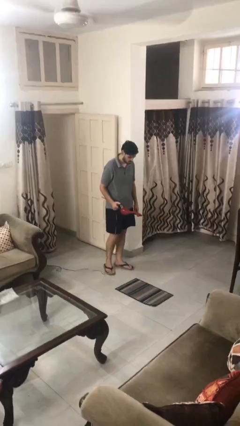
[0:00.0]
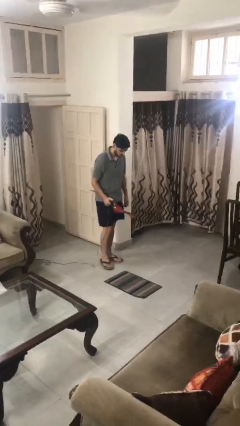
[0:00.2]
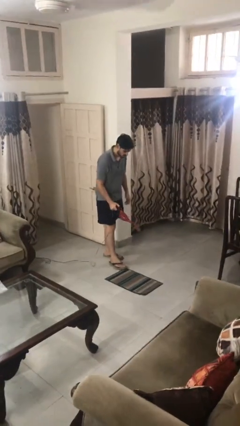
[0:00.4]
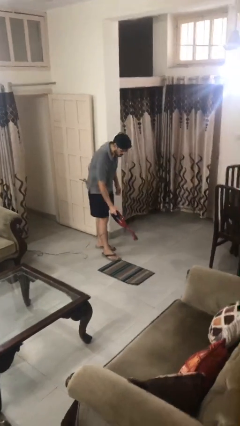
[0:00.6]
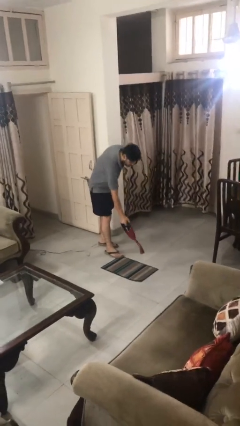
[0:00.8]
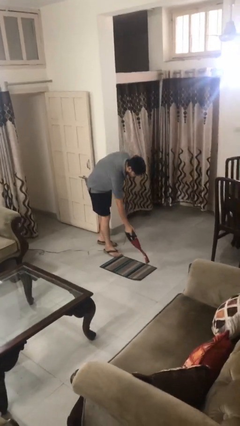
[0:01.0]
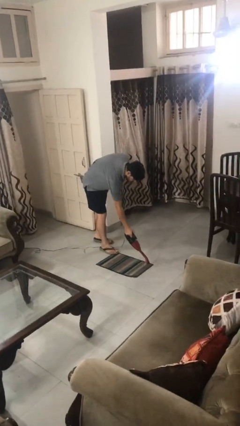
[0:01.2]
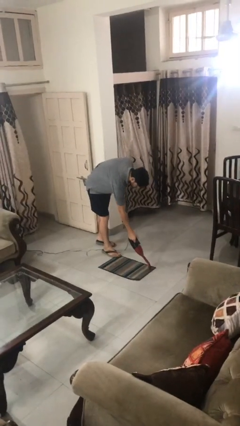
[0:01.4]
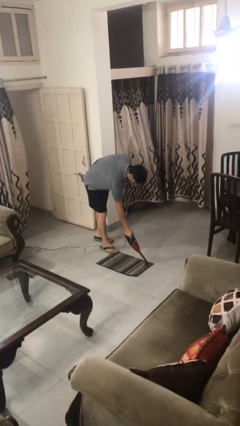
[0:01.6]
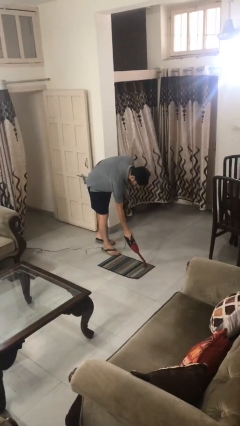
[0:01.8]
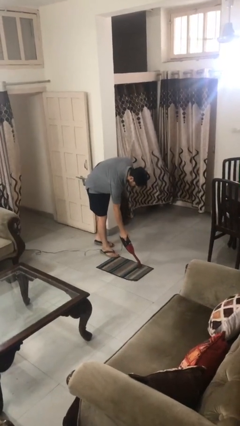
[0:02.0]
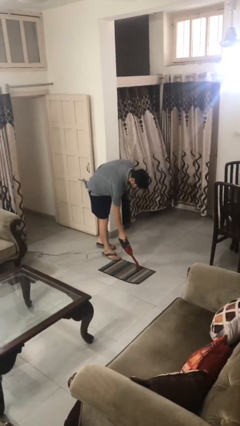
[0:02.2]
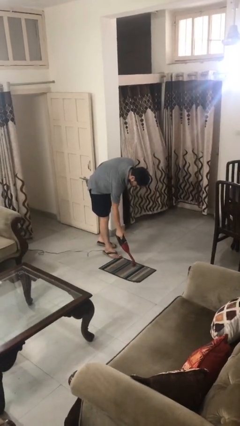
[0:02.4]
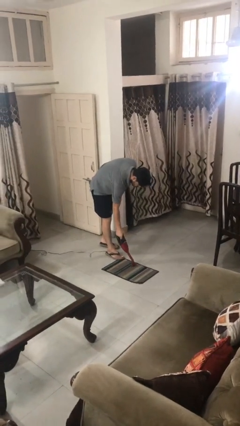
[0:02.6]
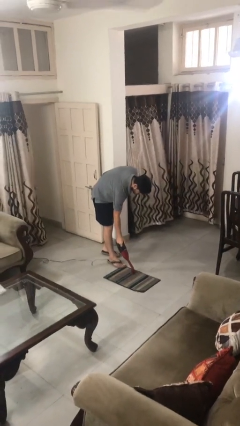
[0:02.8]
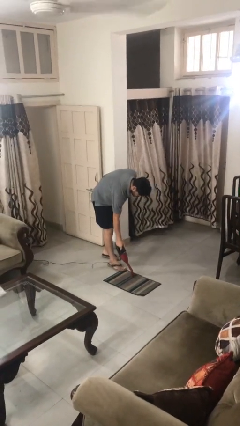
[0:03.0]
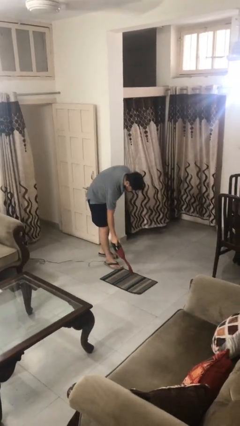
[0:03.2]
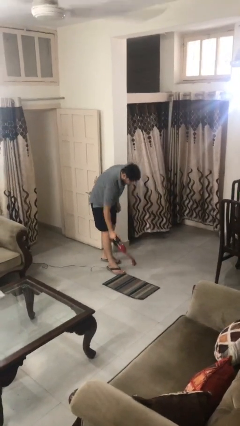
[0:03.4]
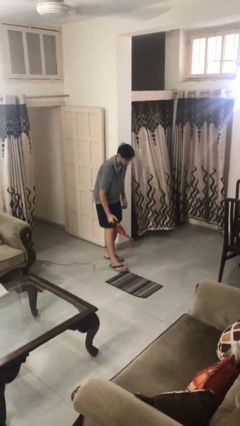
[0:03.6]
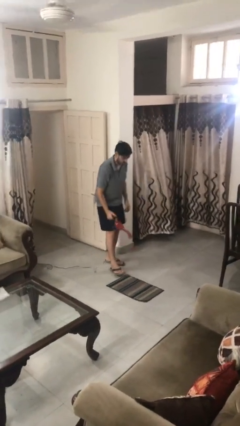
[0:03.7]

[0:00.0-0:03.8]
person vacuums carpet

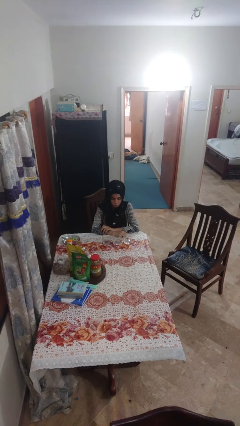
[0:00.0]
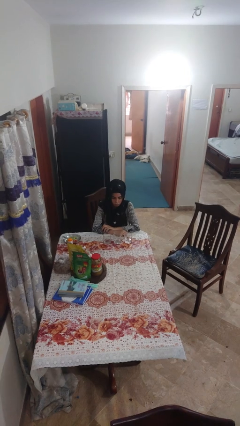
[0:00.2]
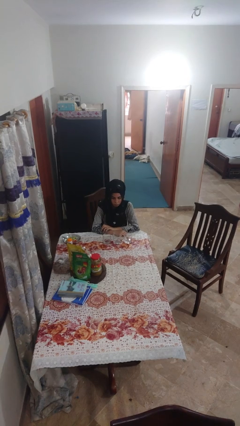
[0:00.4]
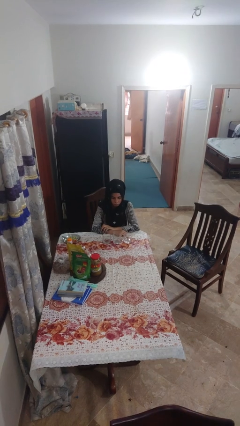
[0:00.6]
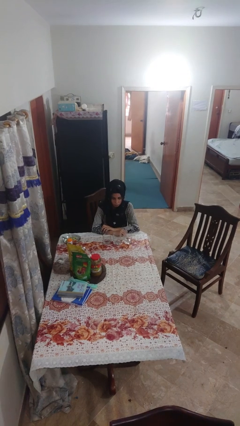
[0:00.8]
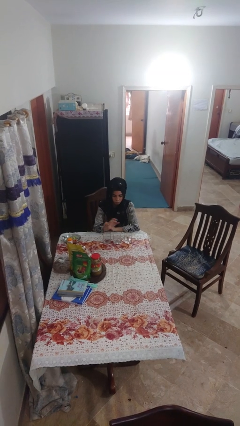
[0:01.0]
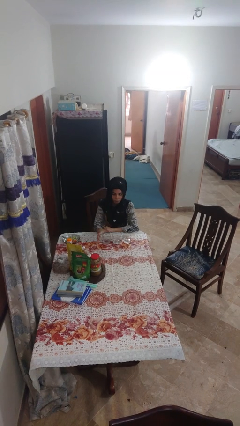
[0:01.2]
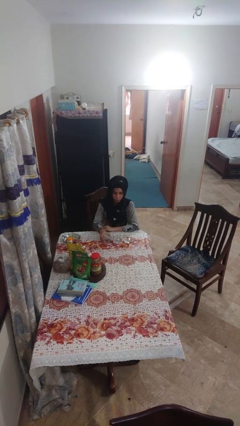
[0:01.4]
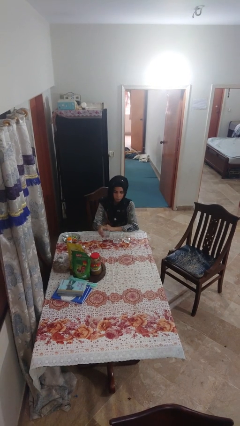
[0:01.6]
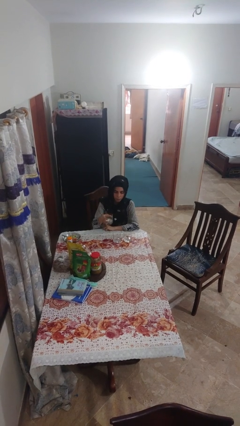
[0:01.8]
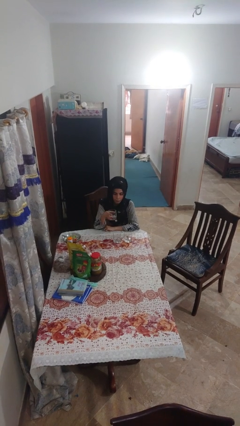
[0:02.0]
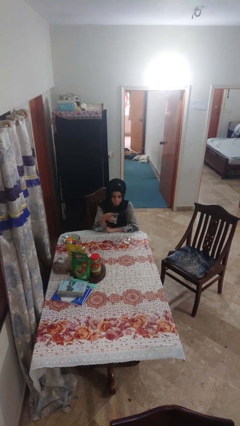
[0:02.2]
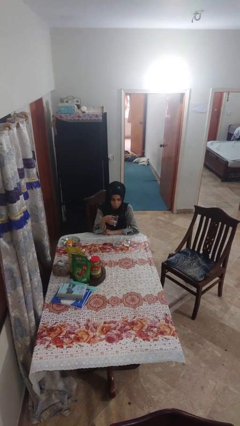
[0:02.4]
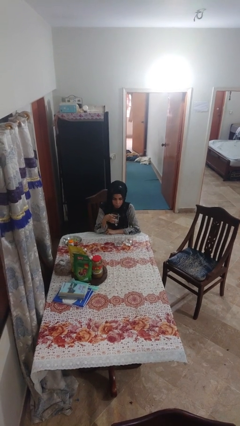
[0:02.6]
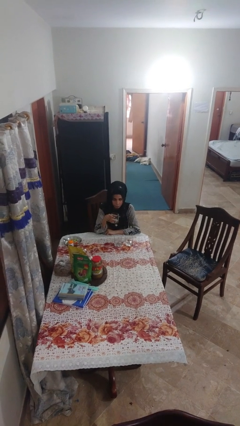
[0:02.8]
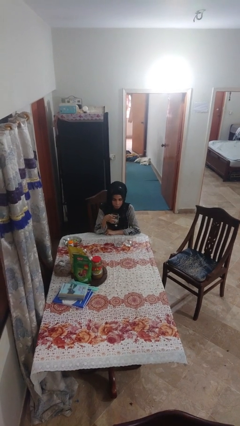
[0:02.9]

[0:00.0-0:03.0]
person picks up object from table

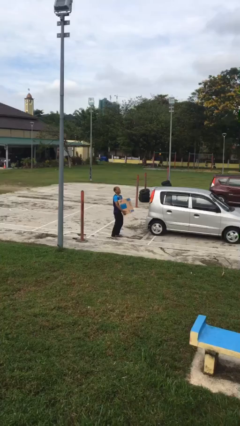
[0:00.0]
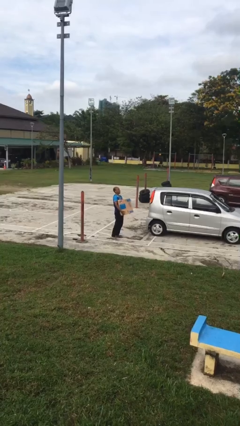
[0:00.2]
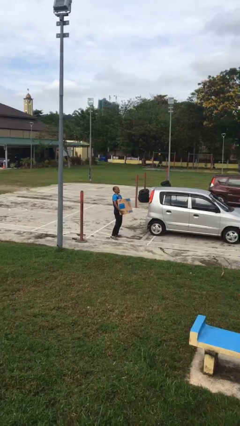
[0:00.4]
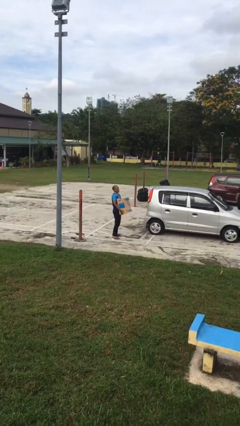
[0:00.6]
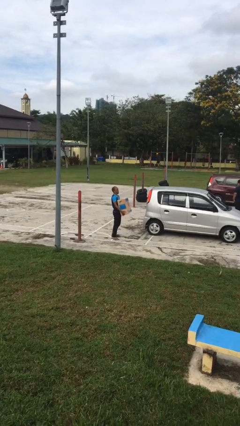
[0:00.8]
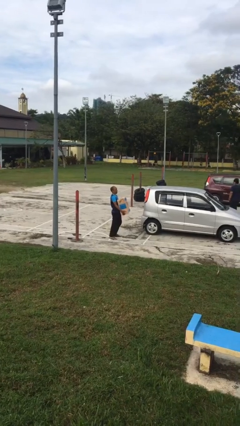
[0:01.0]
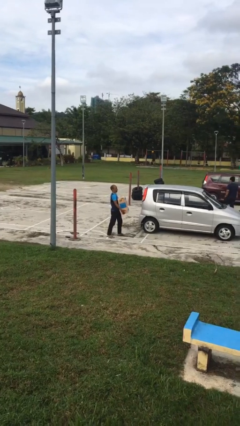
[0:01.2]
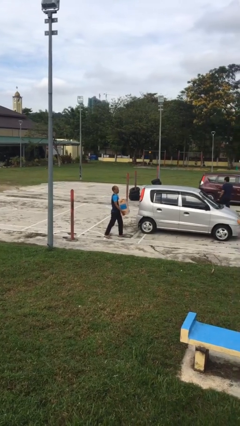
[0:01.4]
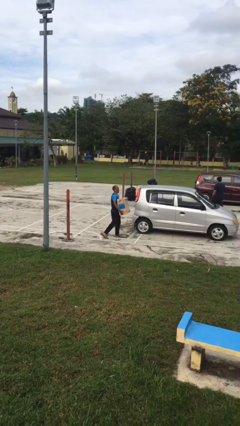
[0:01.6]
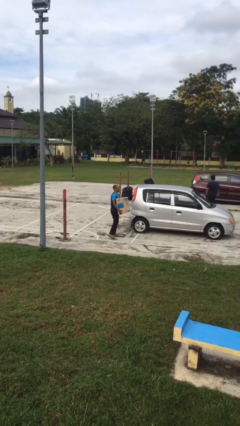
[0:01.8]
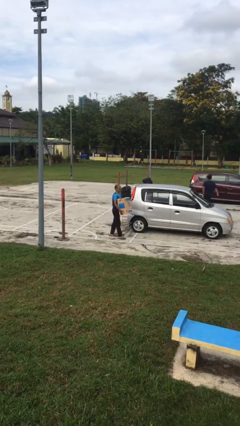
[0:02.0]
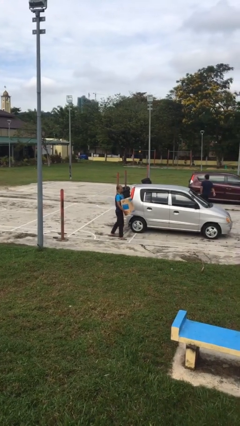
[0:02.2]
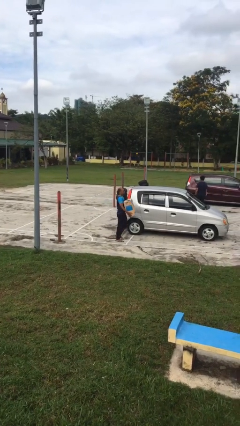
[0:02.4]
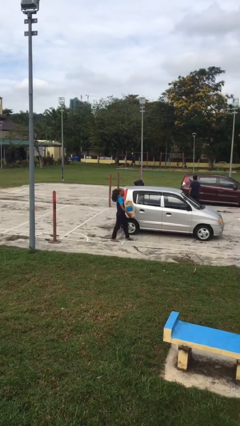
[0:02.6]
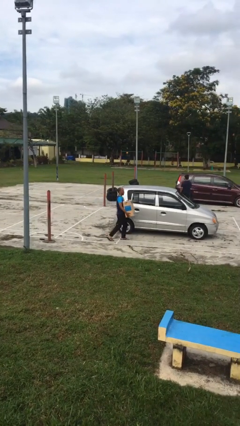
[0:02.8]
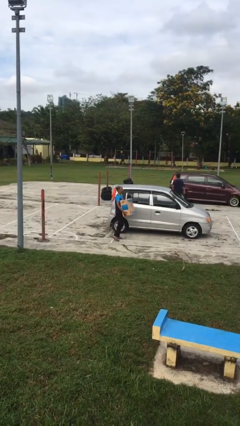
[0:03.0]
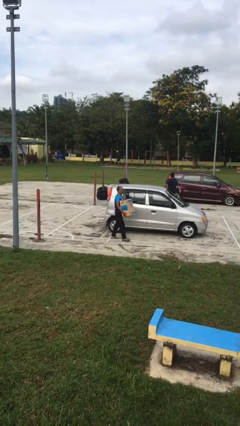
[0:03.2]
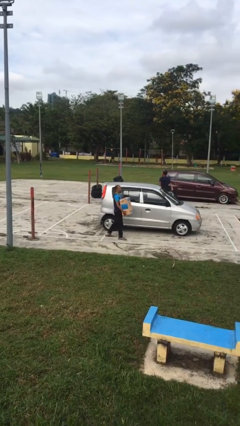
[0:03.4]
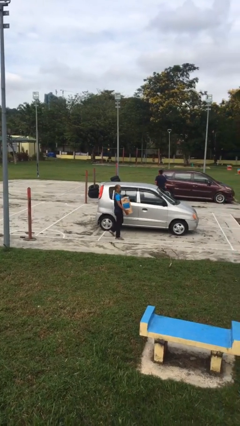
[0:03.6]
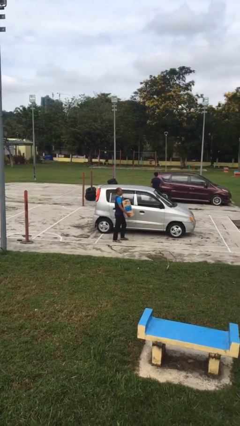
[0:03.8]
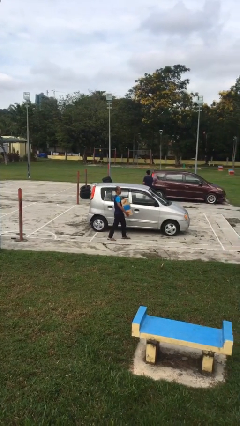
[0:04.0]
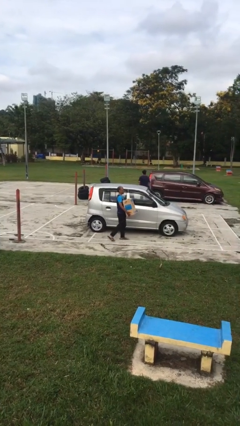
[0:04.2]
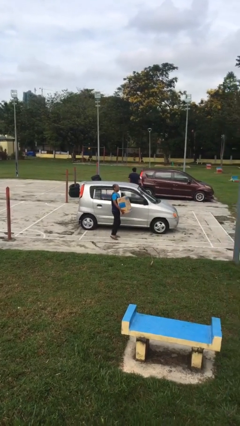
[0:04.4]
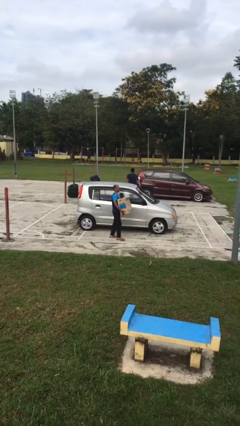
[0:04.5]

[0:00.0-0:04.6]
person carries heavy object

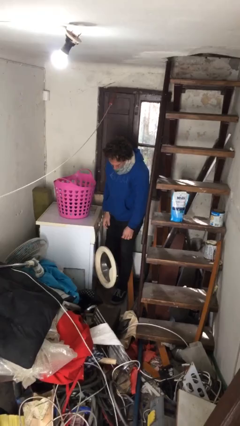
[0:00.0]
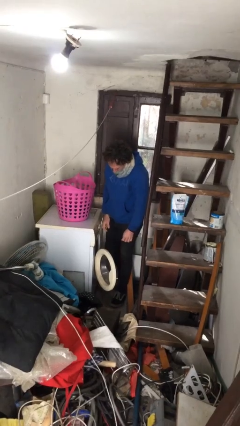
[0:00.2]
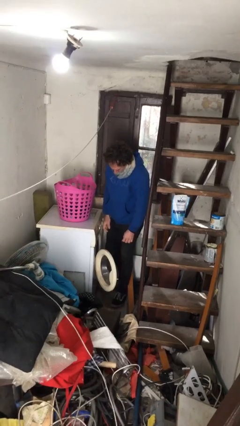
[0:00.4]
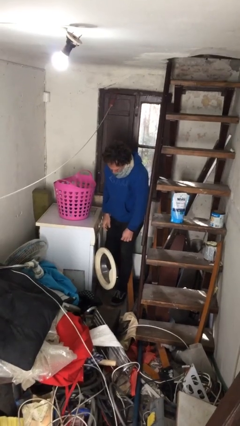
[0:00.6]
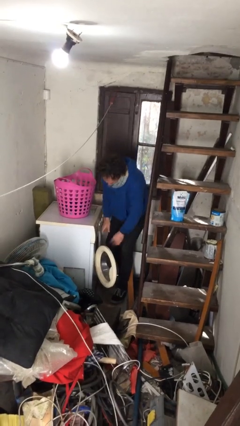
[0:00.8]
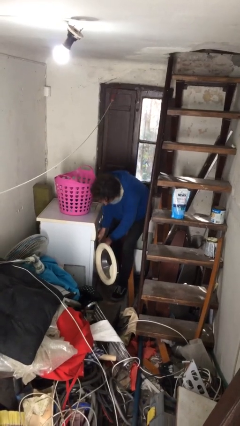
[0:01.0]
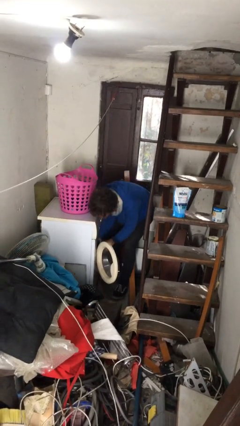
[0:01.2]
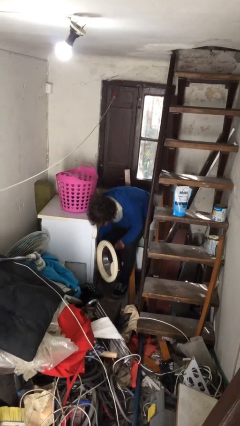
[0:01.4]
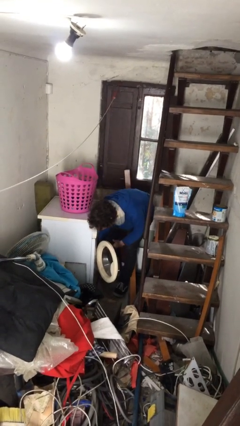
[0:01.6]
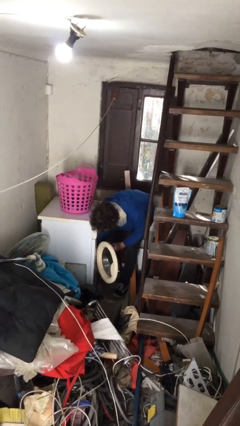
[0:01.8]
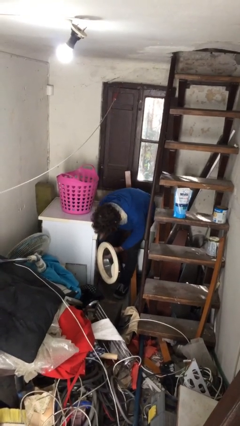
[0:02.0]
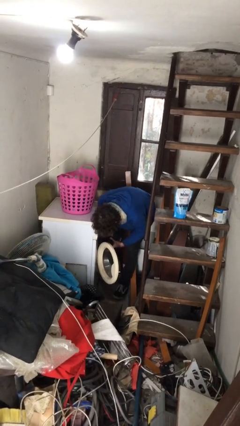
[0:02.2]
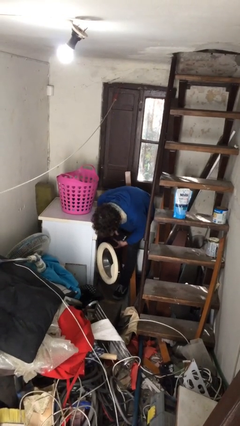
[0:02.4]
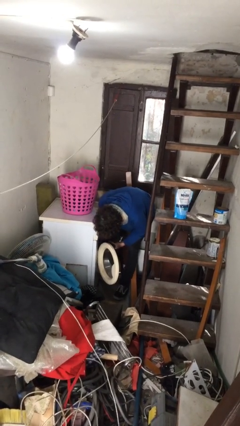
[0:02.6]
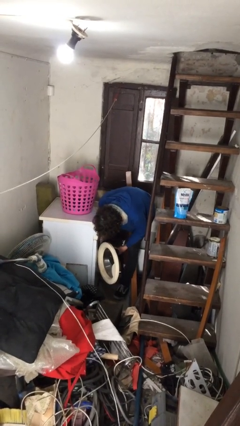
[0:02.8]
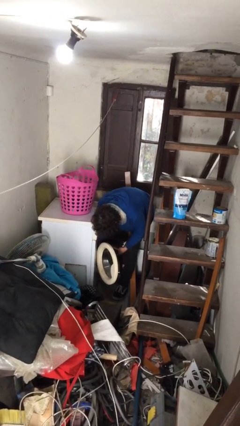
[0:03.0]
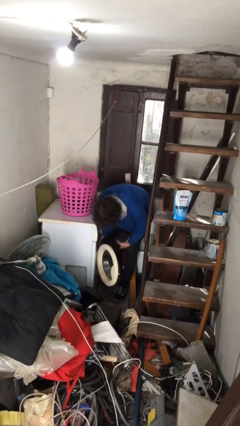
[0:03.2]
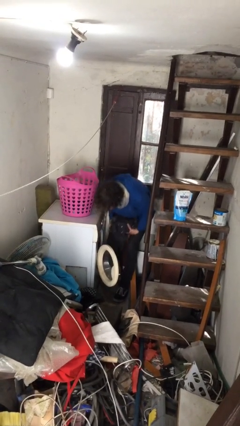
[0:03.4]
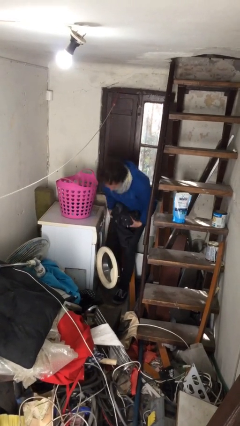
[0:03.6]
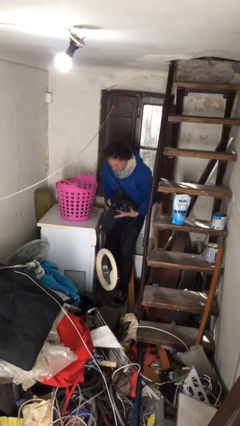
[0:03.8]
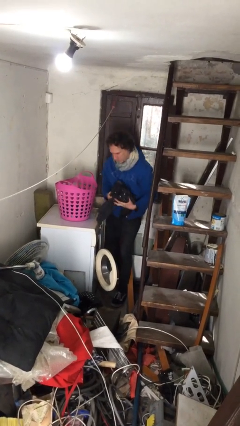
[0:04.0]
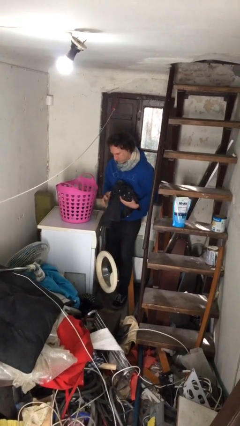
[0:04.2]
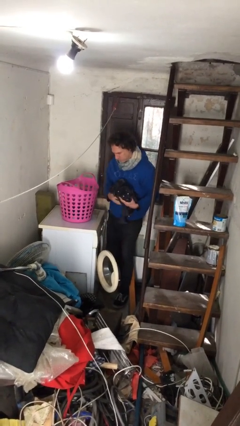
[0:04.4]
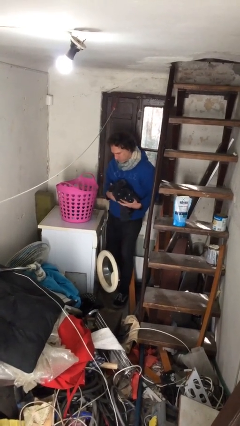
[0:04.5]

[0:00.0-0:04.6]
person loads clotheswasher

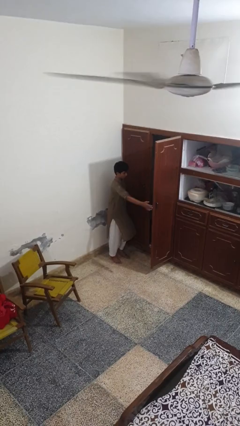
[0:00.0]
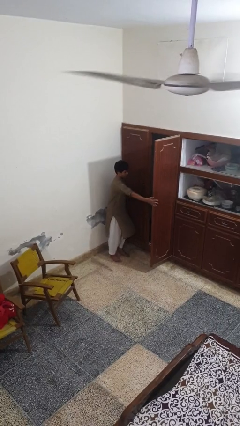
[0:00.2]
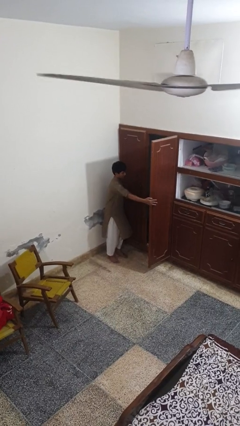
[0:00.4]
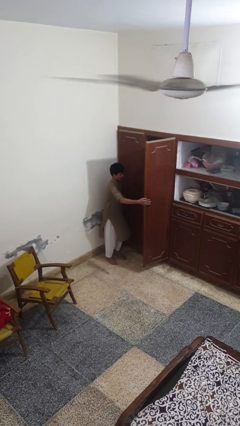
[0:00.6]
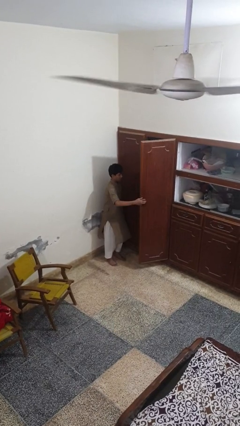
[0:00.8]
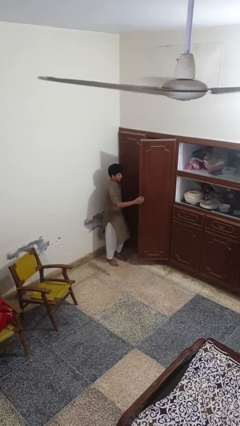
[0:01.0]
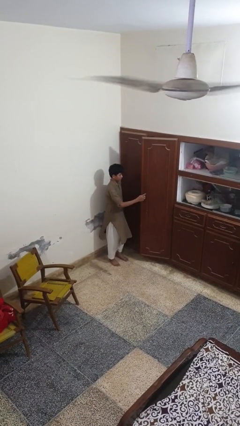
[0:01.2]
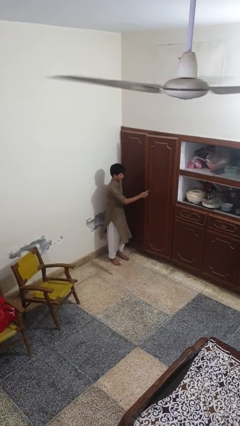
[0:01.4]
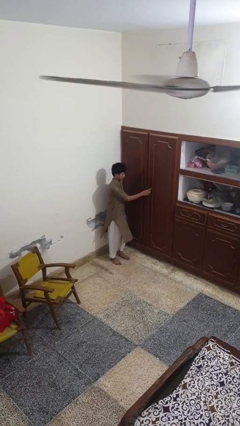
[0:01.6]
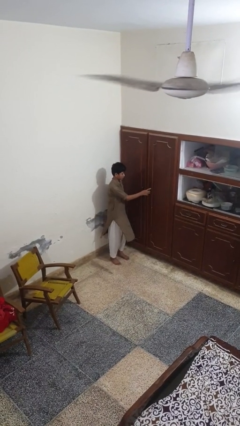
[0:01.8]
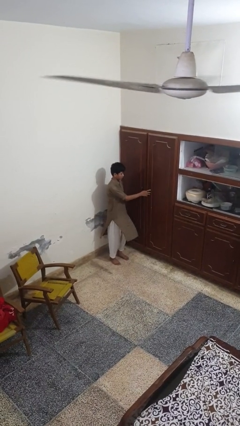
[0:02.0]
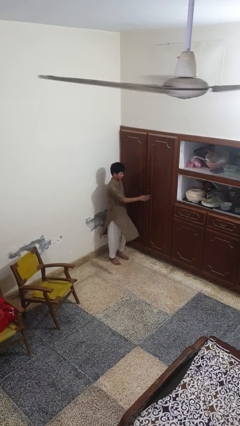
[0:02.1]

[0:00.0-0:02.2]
person closes closet door
